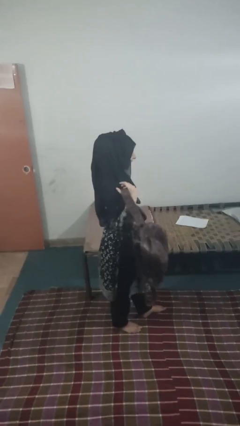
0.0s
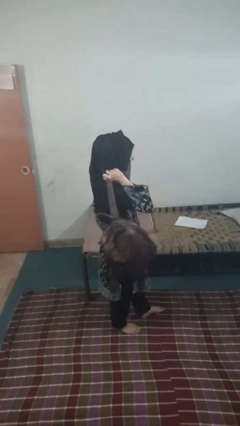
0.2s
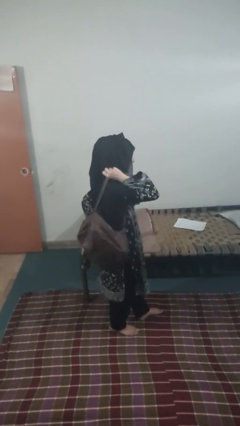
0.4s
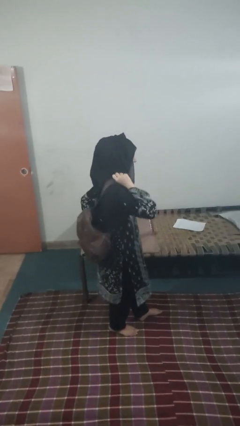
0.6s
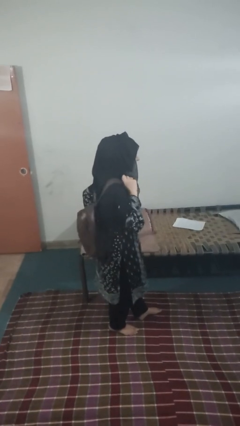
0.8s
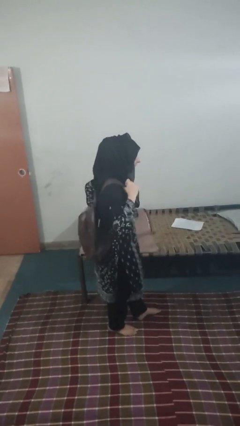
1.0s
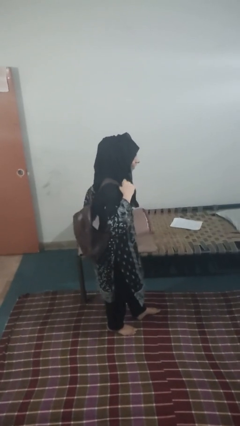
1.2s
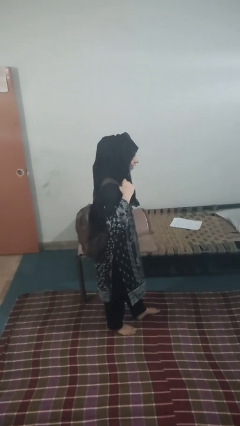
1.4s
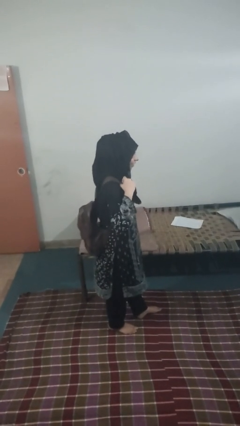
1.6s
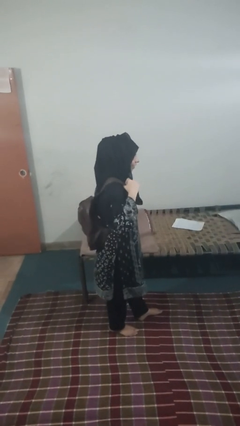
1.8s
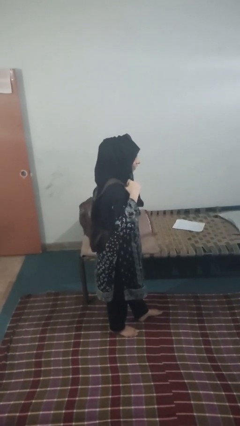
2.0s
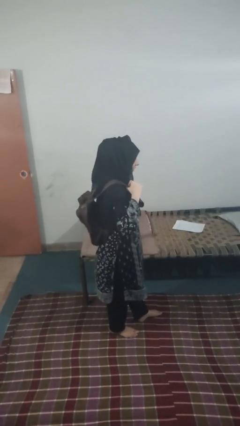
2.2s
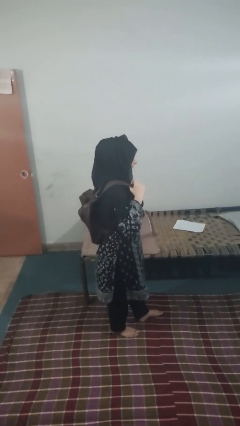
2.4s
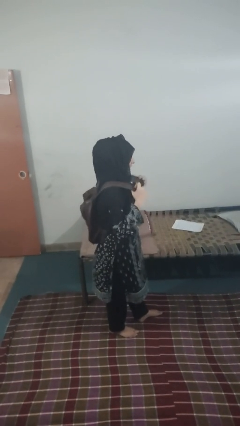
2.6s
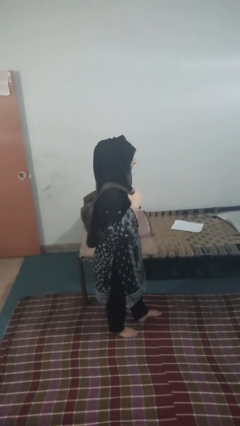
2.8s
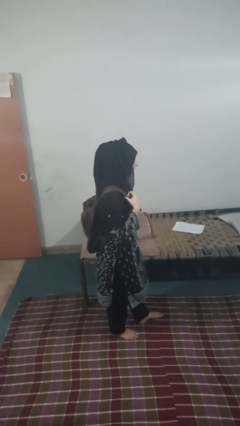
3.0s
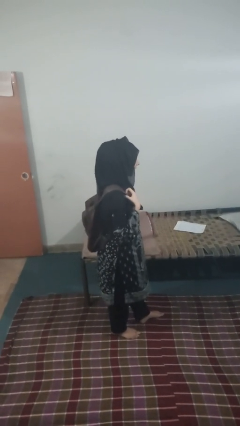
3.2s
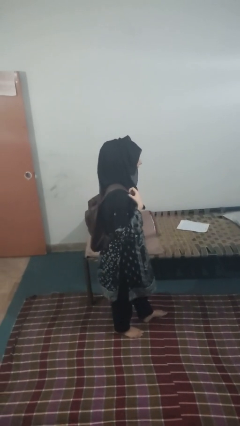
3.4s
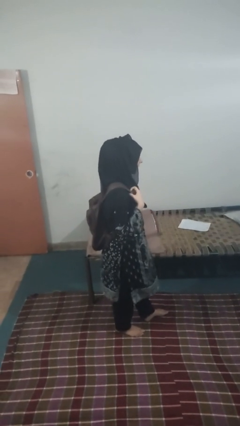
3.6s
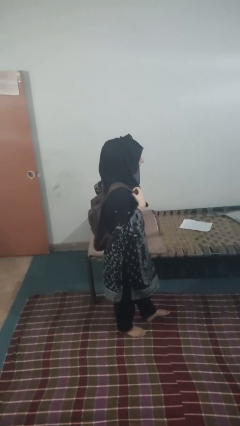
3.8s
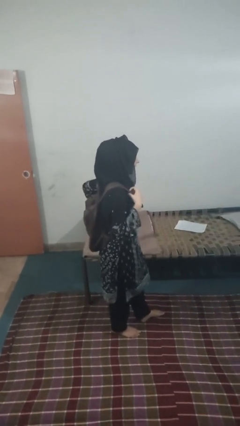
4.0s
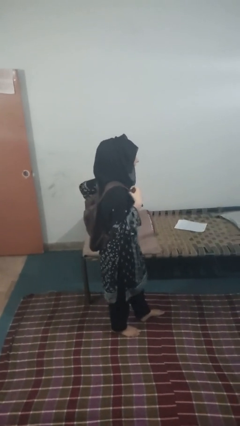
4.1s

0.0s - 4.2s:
person puts on backpack

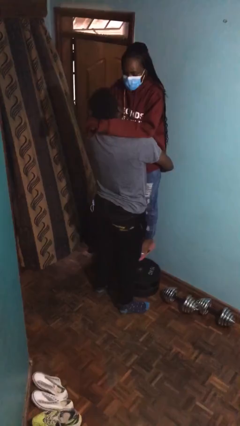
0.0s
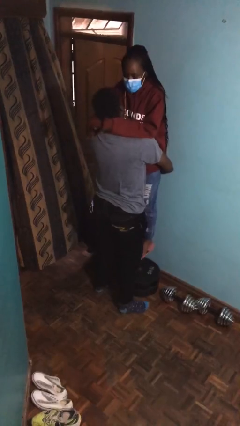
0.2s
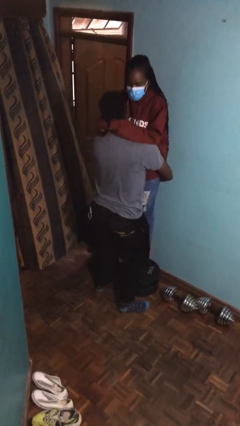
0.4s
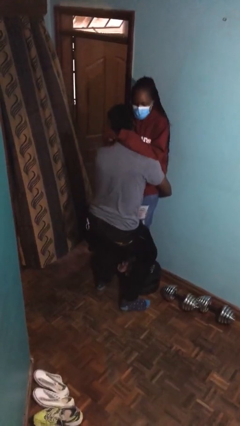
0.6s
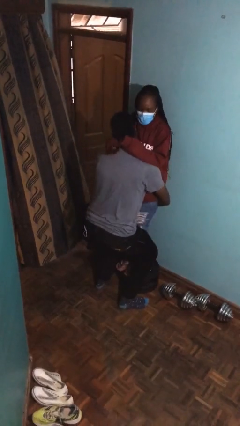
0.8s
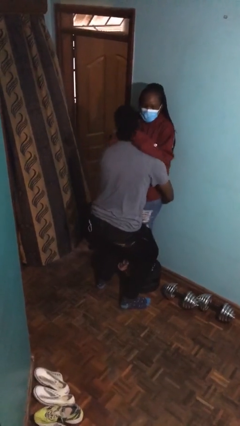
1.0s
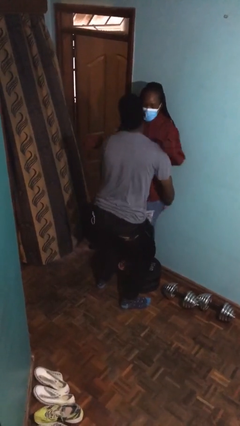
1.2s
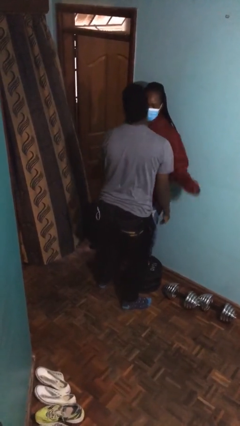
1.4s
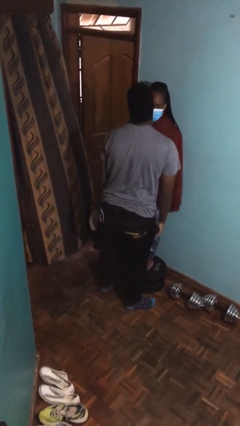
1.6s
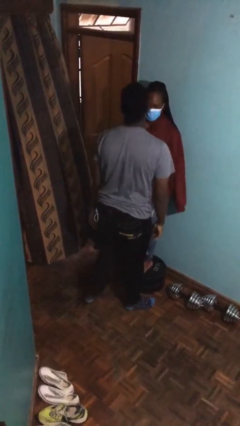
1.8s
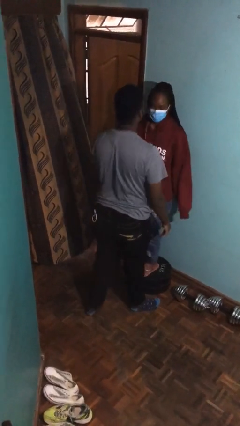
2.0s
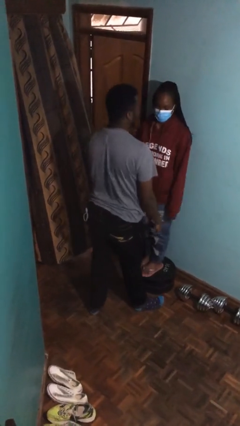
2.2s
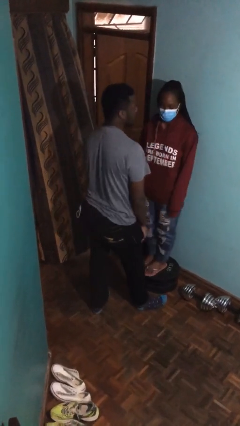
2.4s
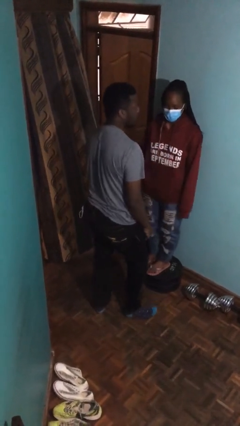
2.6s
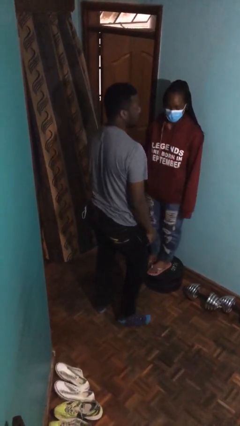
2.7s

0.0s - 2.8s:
person puts down person

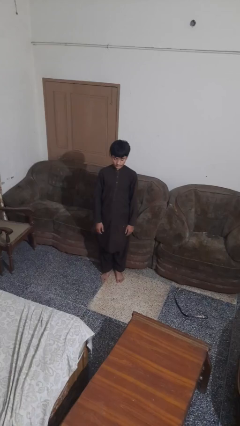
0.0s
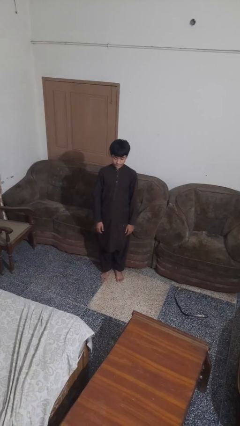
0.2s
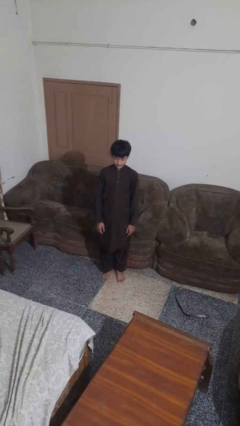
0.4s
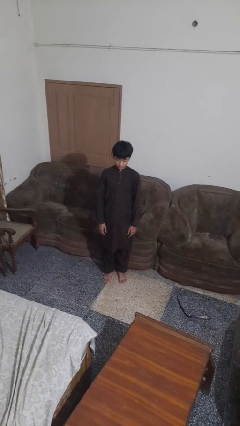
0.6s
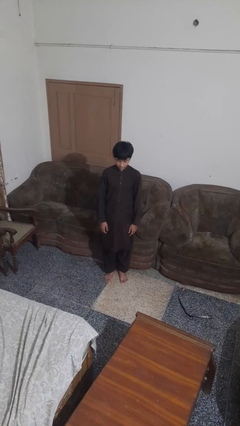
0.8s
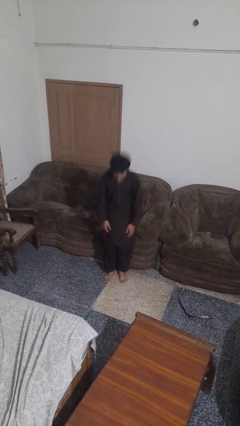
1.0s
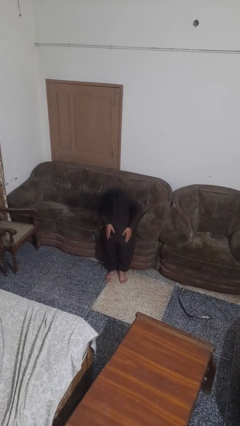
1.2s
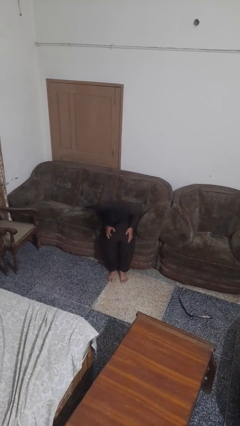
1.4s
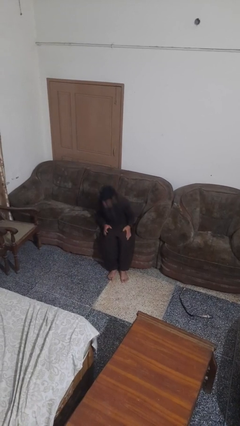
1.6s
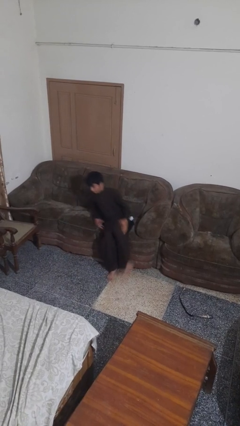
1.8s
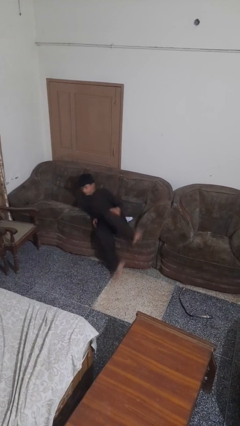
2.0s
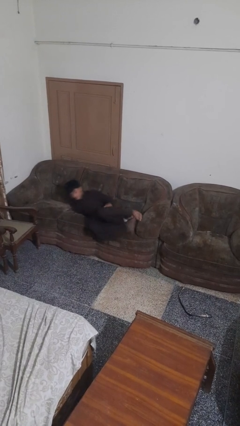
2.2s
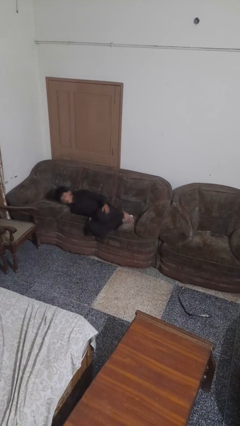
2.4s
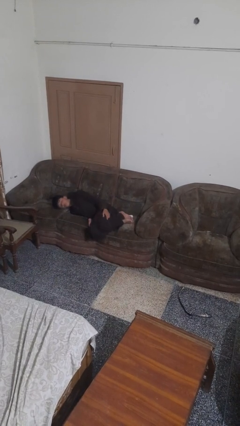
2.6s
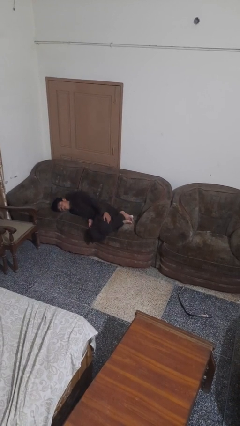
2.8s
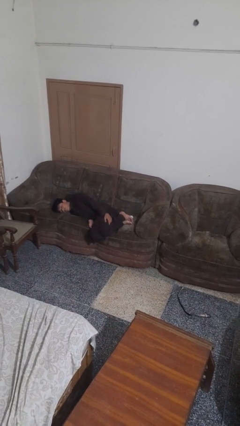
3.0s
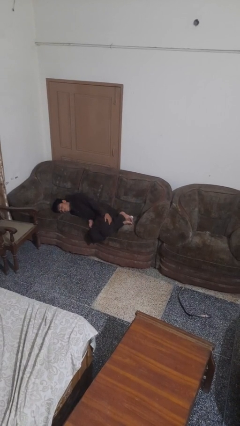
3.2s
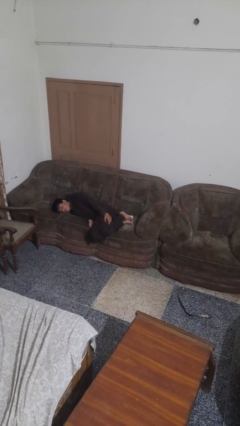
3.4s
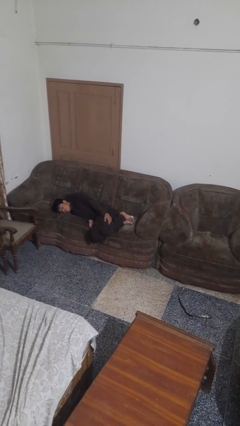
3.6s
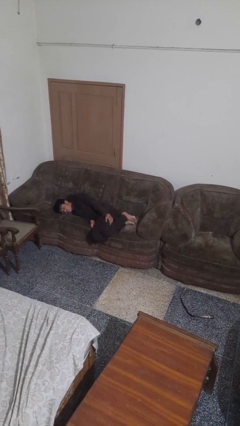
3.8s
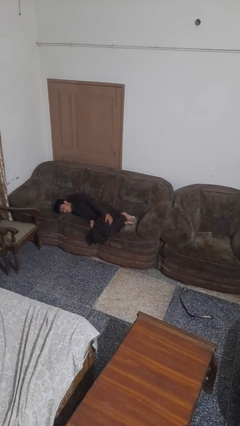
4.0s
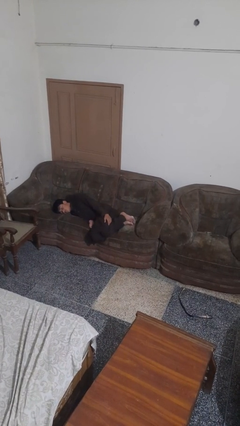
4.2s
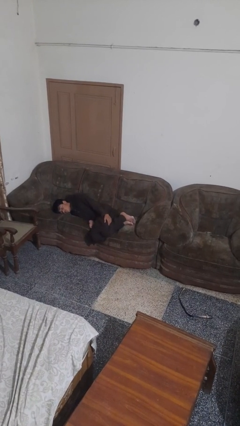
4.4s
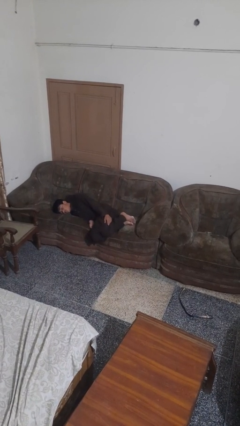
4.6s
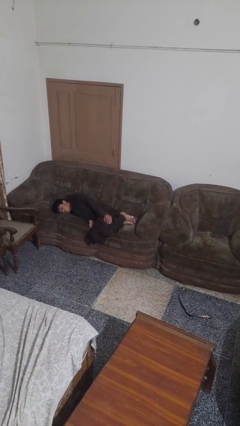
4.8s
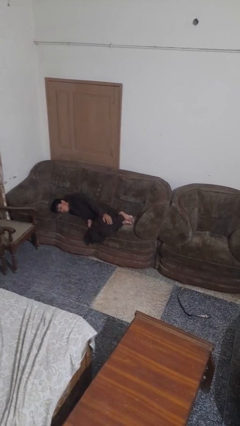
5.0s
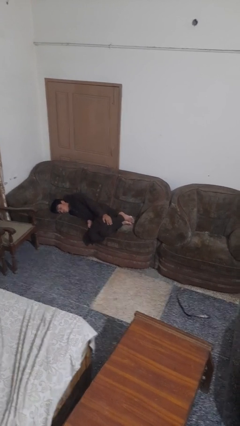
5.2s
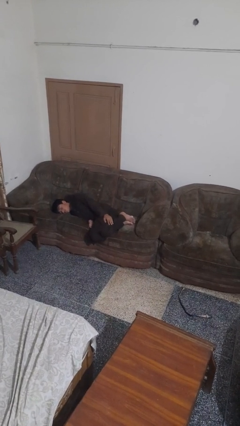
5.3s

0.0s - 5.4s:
person lies down on couch

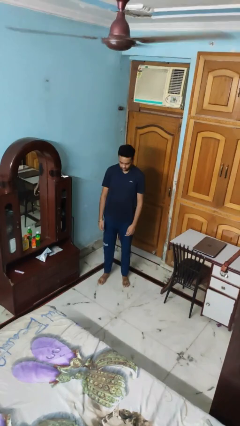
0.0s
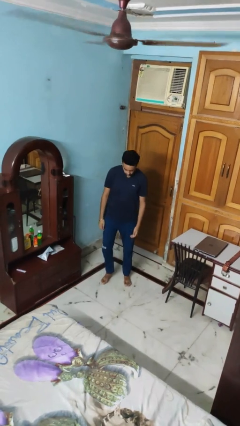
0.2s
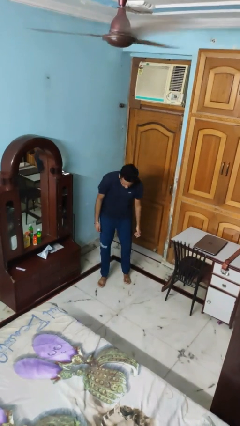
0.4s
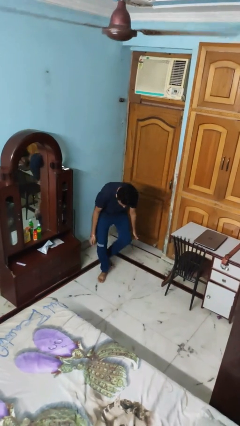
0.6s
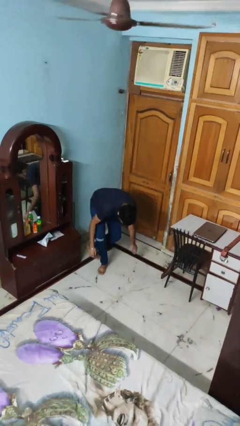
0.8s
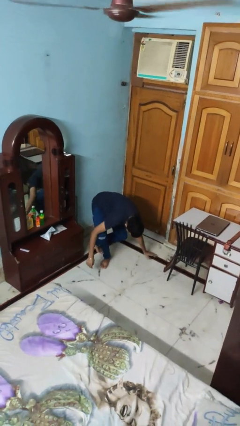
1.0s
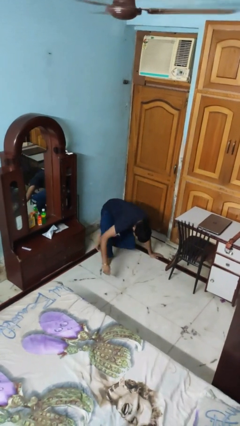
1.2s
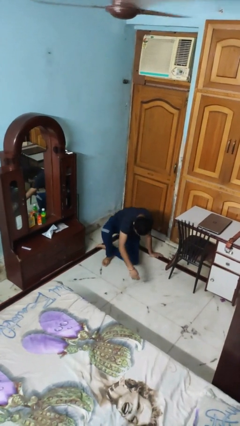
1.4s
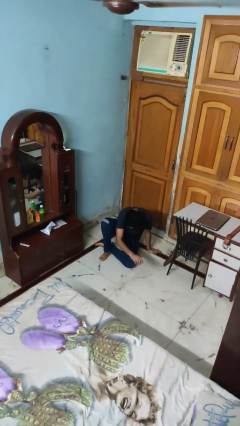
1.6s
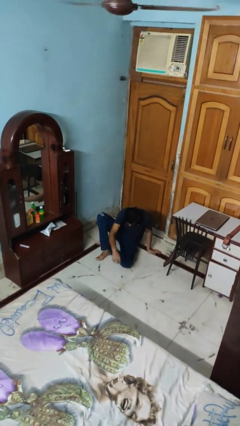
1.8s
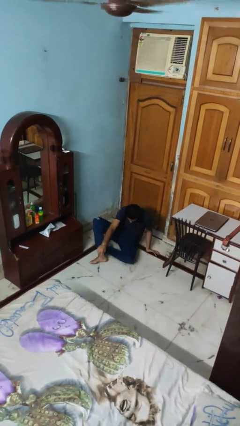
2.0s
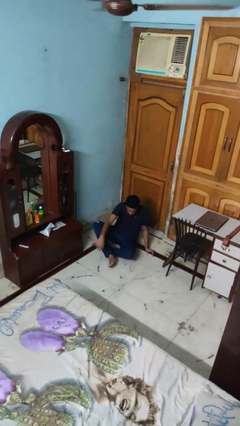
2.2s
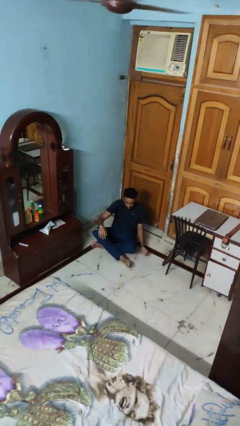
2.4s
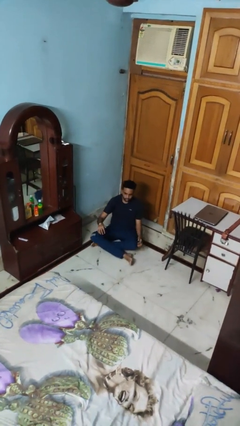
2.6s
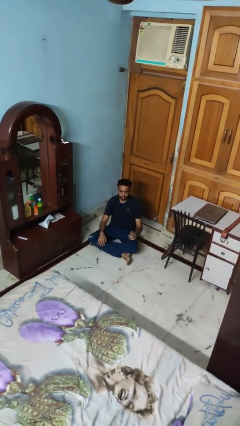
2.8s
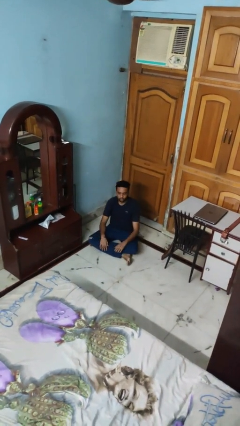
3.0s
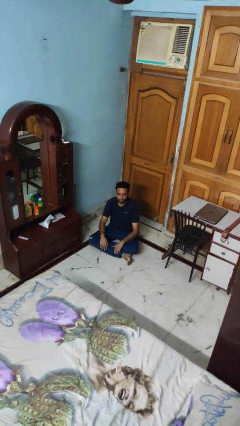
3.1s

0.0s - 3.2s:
person sits crisscross

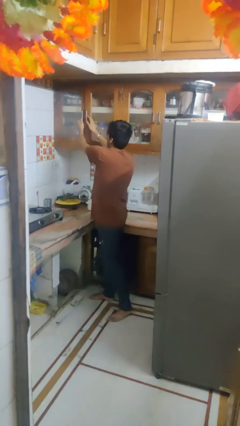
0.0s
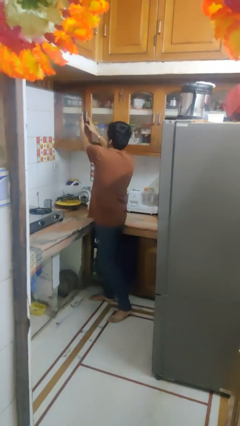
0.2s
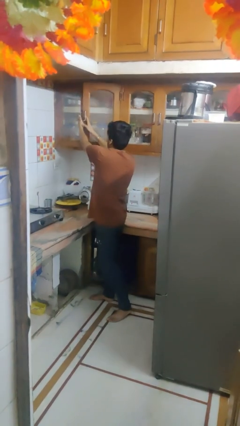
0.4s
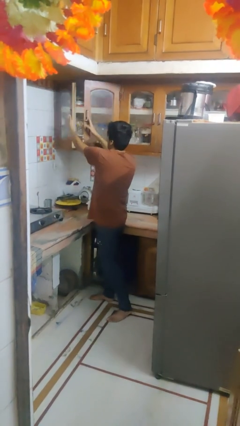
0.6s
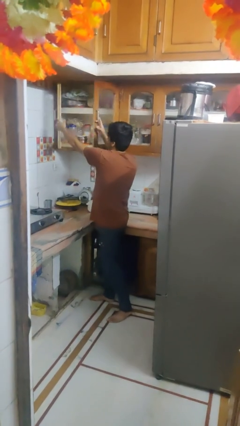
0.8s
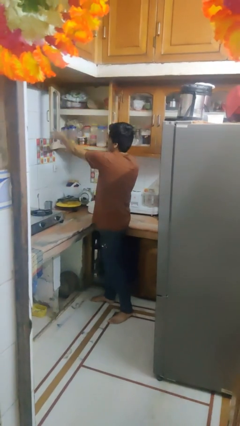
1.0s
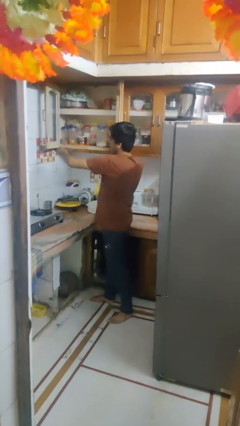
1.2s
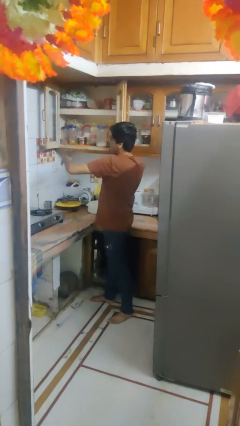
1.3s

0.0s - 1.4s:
person opens cabinet

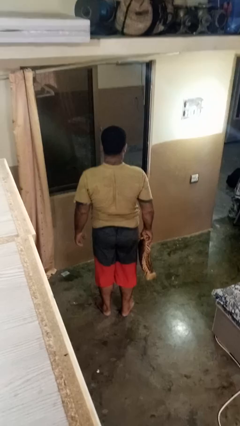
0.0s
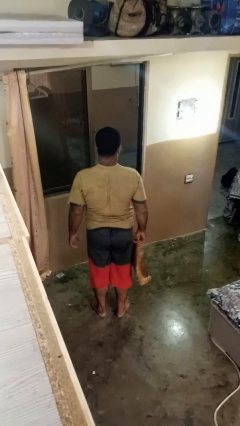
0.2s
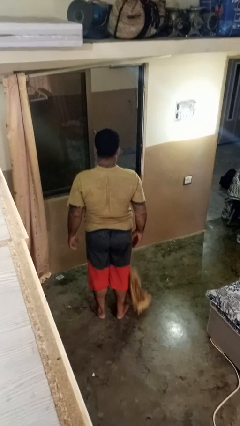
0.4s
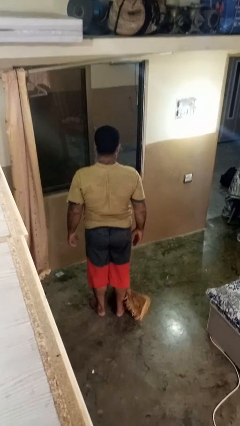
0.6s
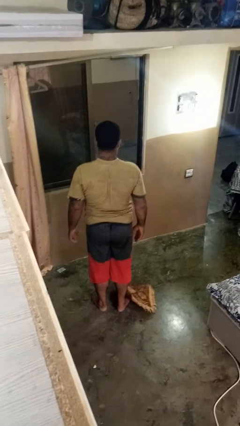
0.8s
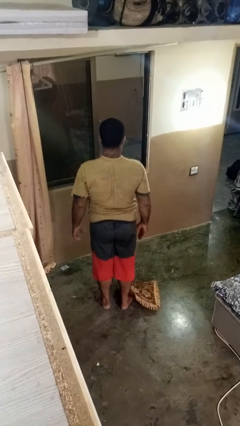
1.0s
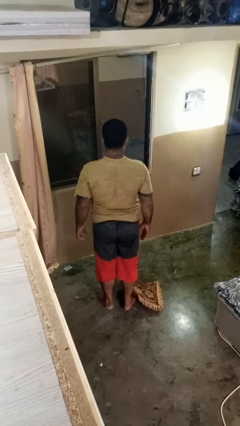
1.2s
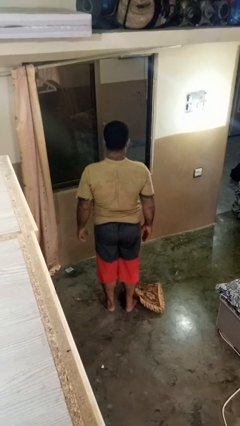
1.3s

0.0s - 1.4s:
person drops object
